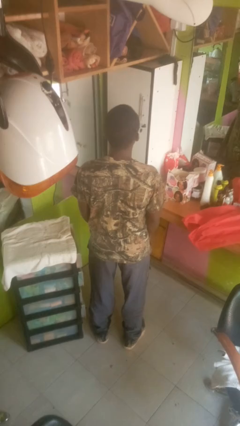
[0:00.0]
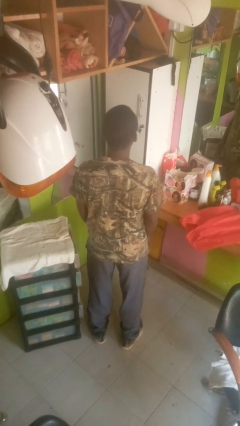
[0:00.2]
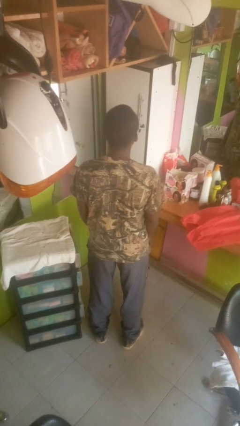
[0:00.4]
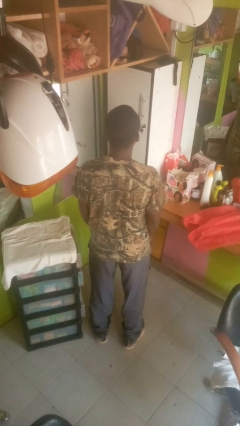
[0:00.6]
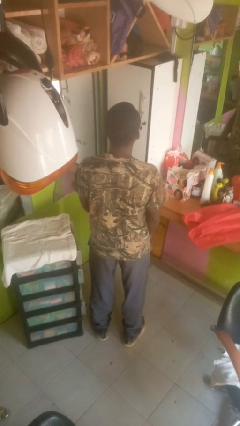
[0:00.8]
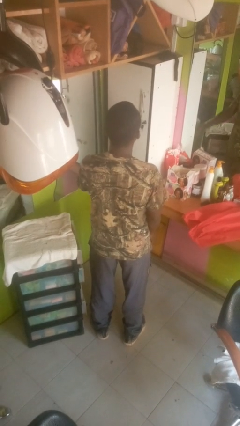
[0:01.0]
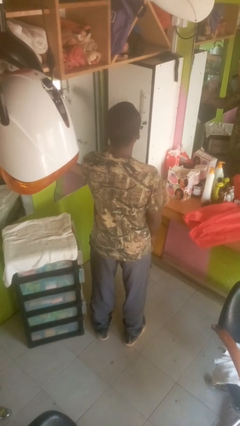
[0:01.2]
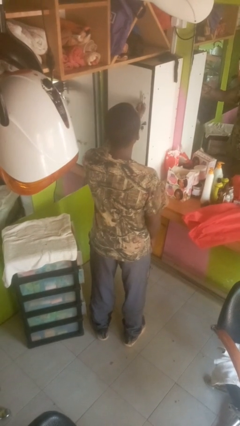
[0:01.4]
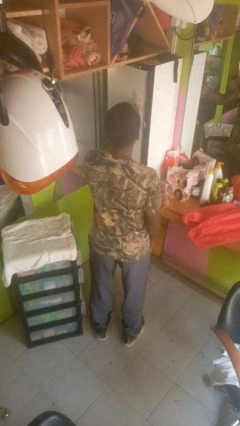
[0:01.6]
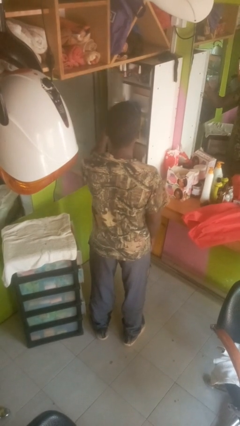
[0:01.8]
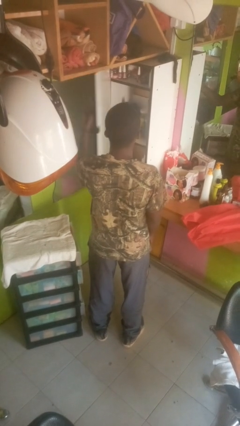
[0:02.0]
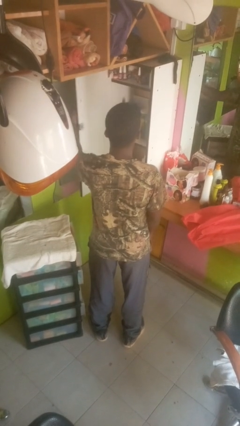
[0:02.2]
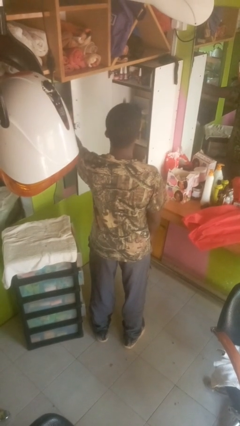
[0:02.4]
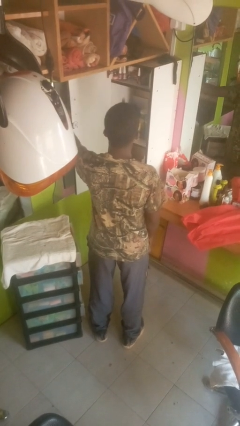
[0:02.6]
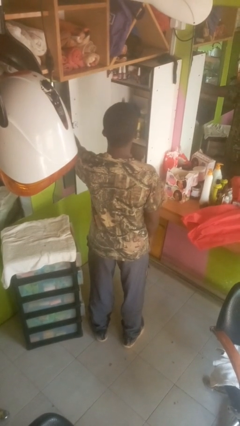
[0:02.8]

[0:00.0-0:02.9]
person opens closet door

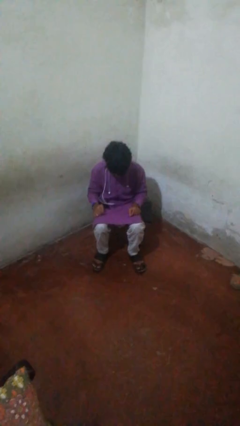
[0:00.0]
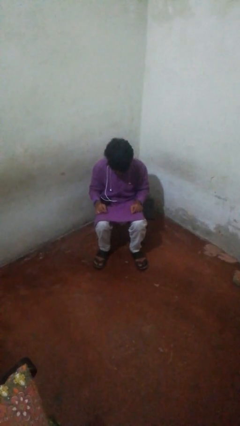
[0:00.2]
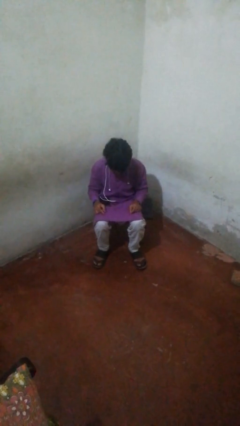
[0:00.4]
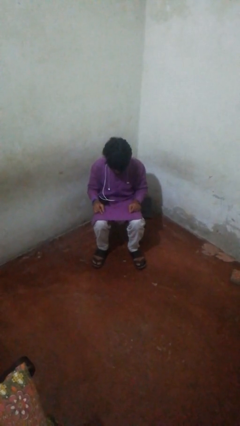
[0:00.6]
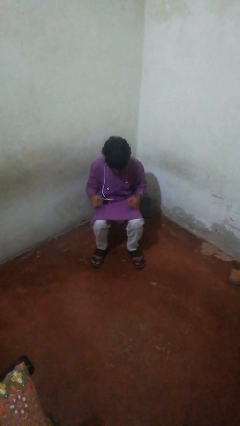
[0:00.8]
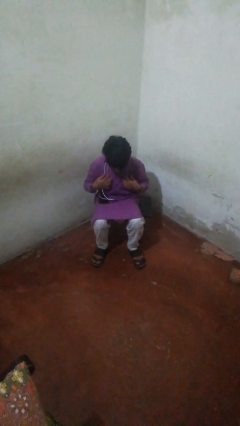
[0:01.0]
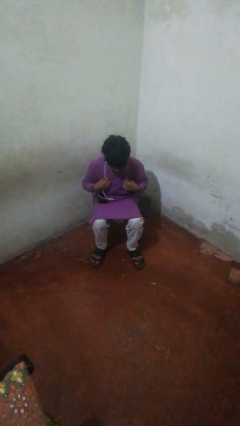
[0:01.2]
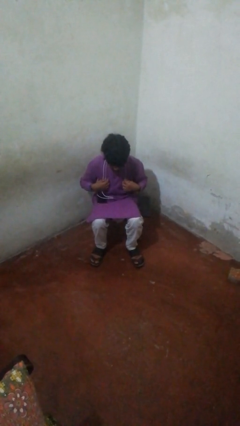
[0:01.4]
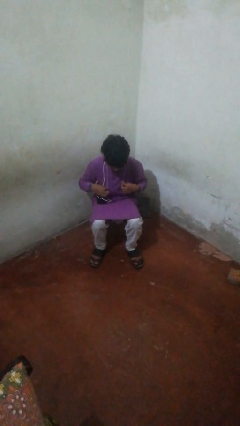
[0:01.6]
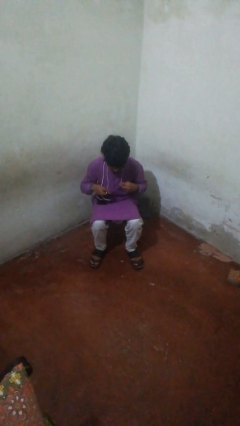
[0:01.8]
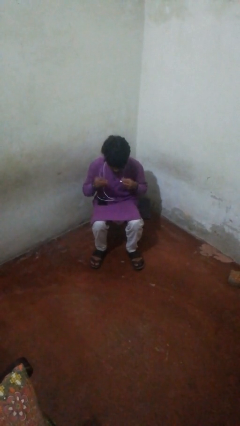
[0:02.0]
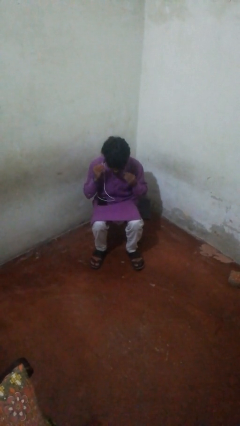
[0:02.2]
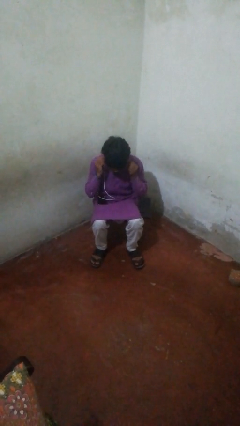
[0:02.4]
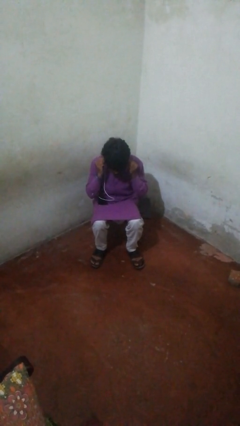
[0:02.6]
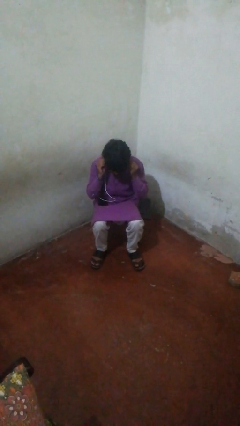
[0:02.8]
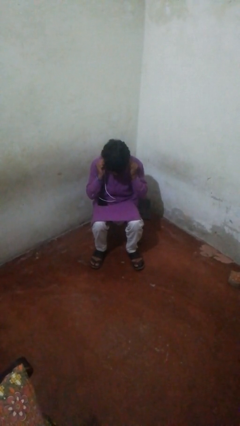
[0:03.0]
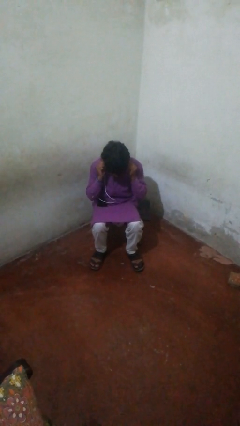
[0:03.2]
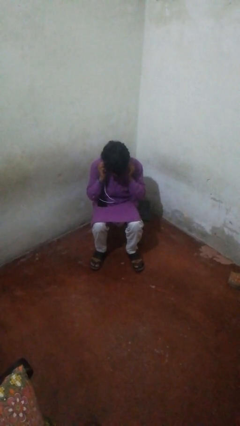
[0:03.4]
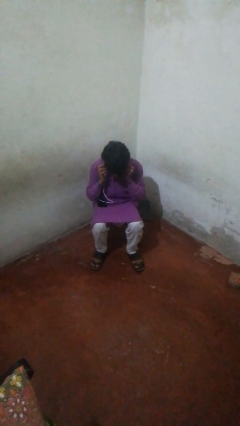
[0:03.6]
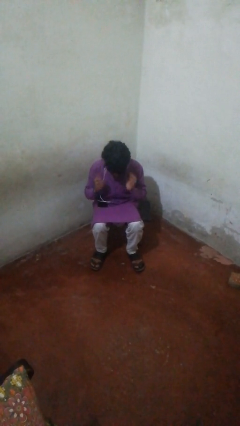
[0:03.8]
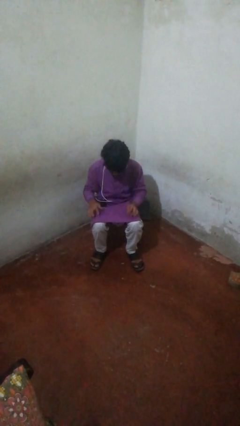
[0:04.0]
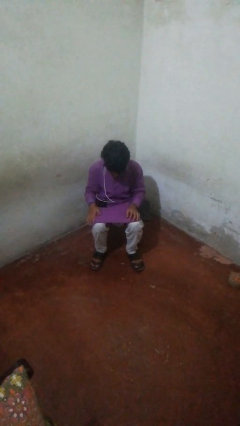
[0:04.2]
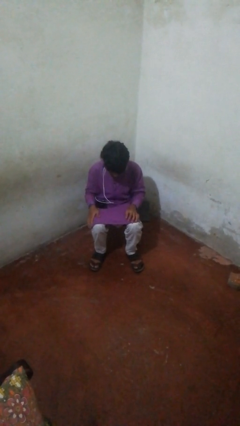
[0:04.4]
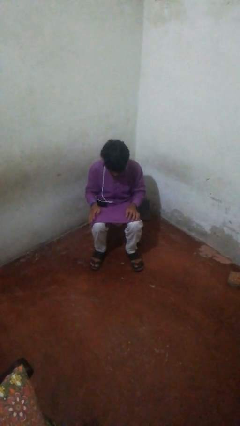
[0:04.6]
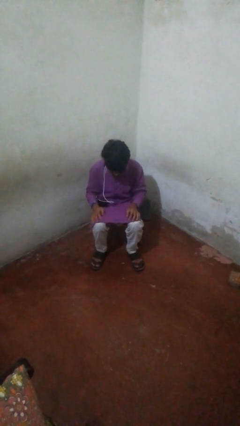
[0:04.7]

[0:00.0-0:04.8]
person puts on headphones

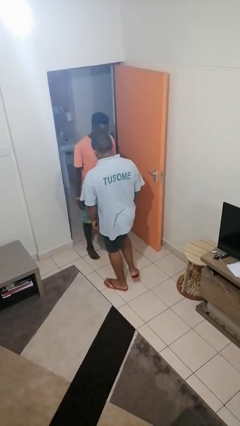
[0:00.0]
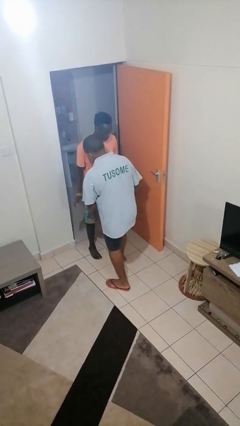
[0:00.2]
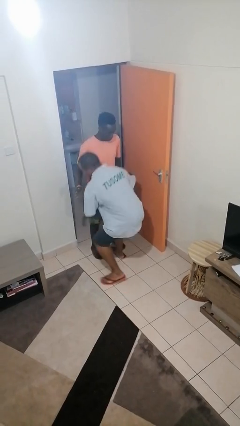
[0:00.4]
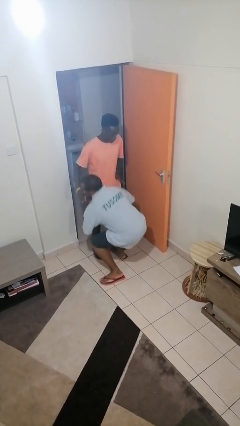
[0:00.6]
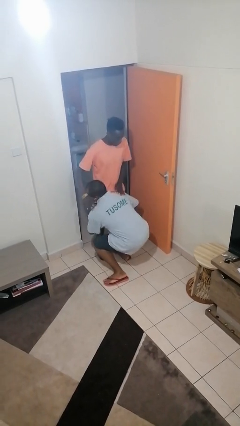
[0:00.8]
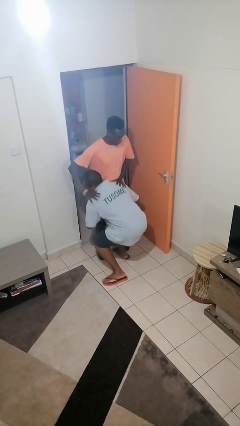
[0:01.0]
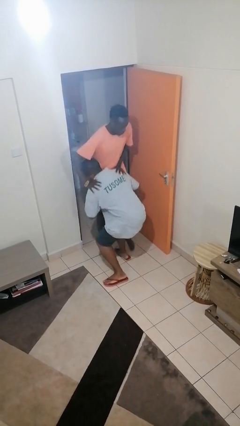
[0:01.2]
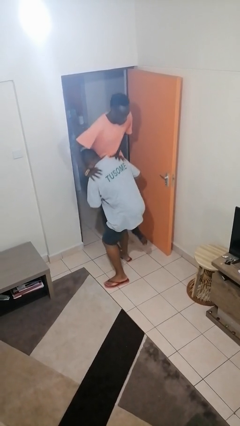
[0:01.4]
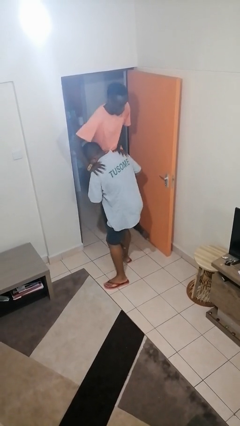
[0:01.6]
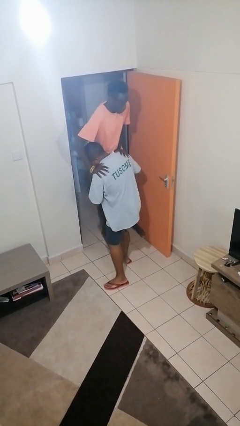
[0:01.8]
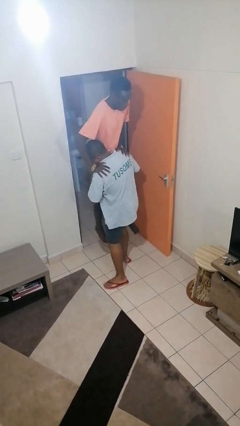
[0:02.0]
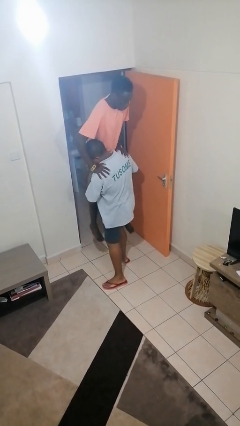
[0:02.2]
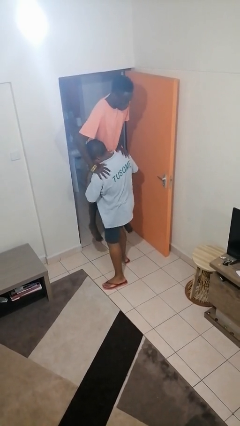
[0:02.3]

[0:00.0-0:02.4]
person carries person over shoulder

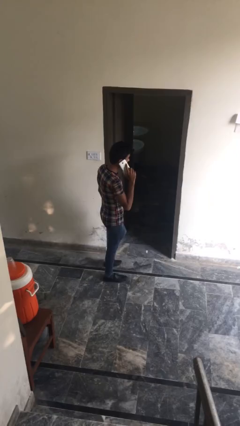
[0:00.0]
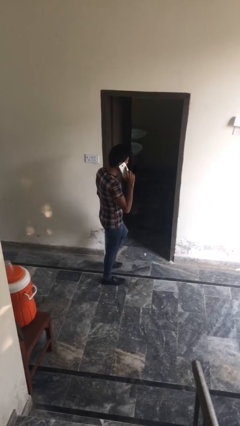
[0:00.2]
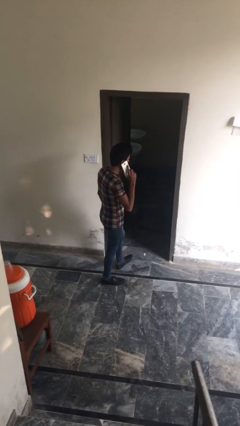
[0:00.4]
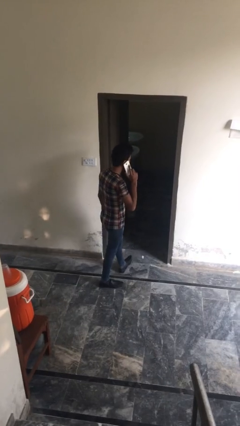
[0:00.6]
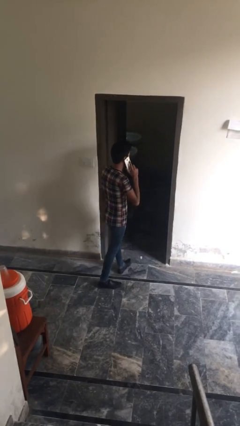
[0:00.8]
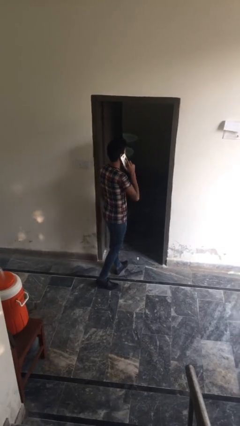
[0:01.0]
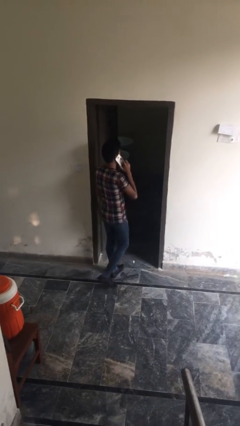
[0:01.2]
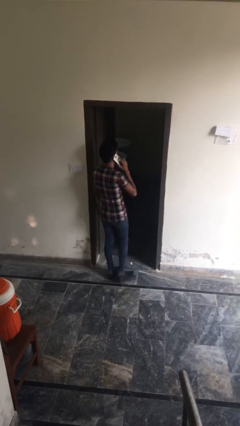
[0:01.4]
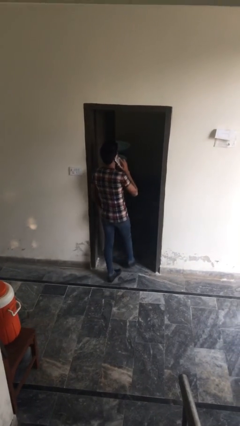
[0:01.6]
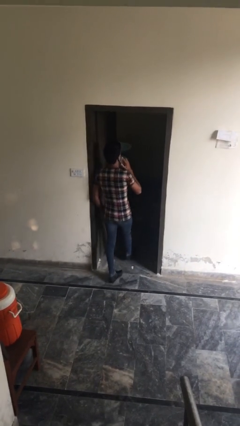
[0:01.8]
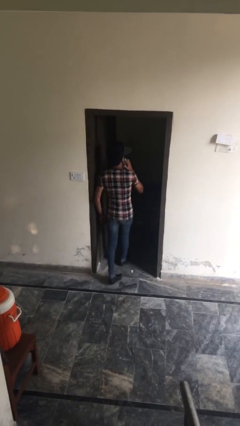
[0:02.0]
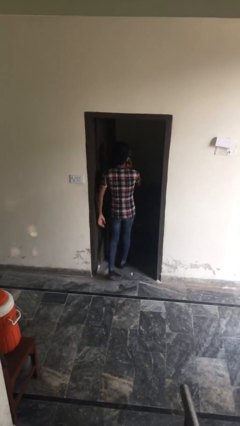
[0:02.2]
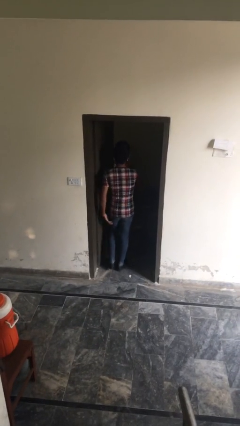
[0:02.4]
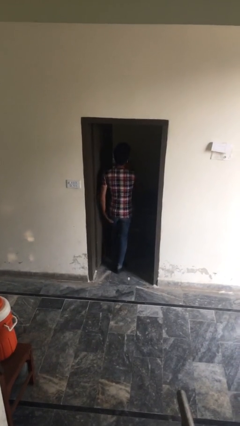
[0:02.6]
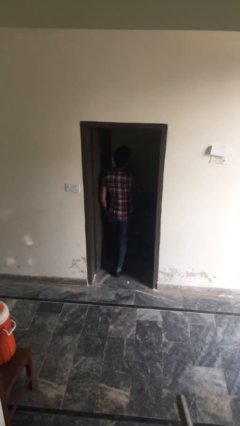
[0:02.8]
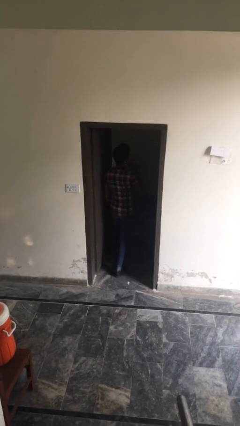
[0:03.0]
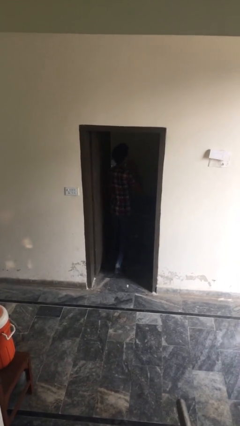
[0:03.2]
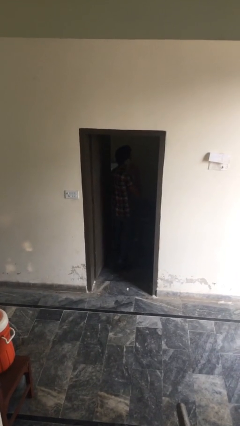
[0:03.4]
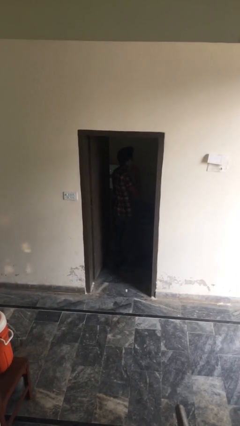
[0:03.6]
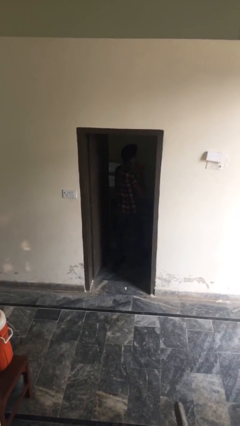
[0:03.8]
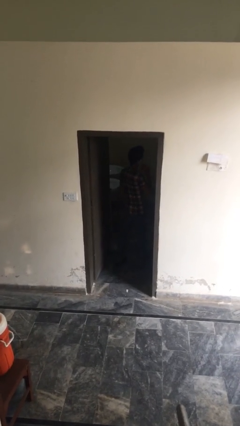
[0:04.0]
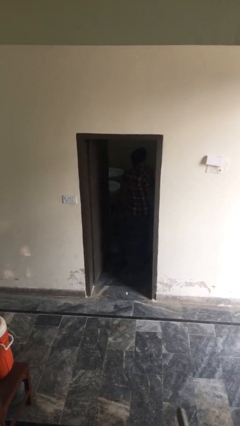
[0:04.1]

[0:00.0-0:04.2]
person exits scene through structure

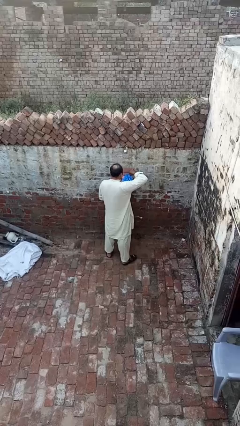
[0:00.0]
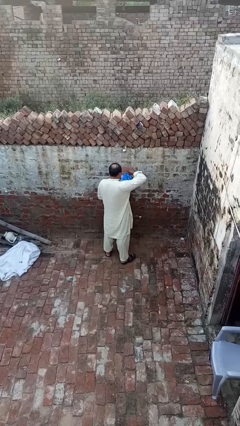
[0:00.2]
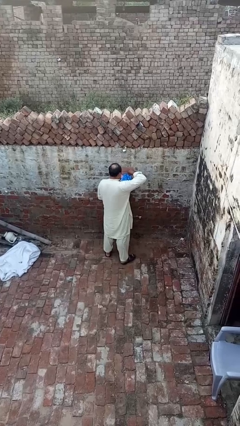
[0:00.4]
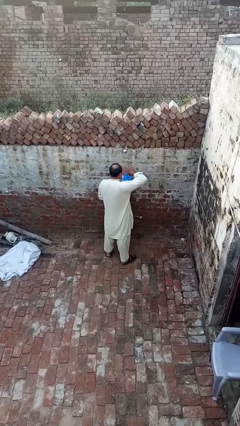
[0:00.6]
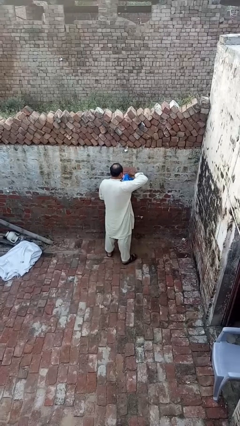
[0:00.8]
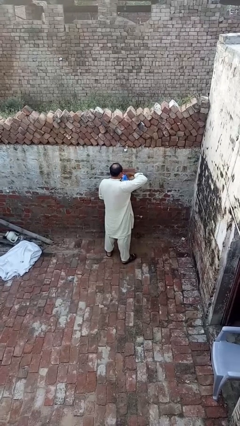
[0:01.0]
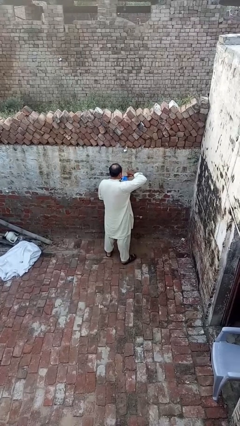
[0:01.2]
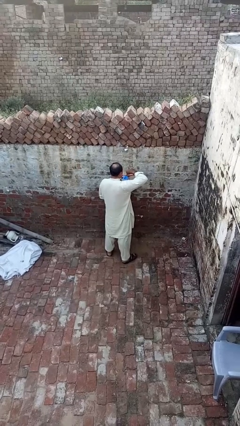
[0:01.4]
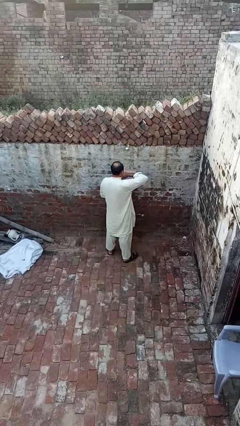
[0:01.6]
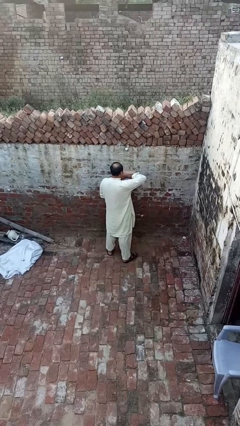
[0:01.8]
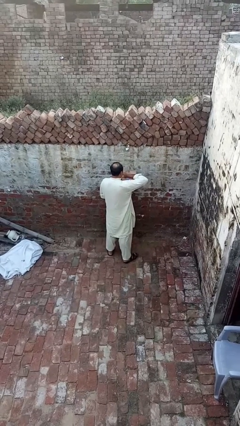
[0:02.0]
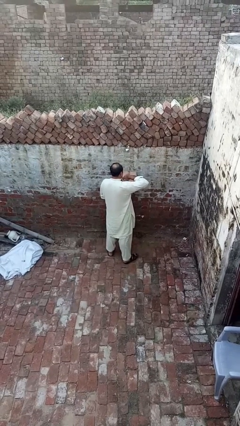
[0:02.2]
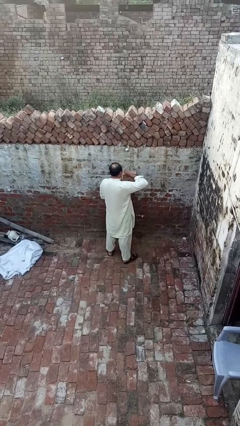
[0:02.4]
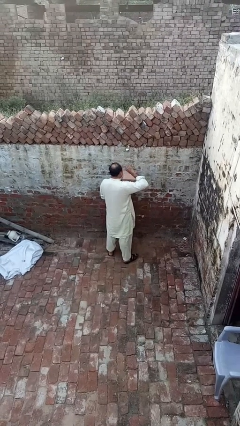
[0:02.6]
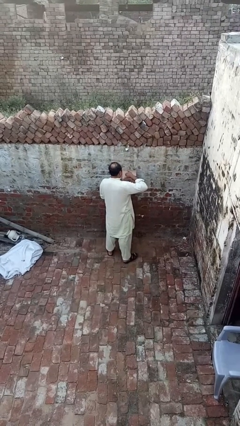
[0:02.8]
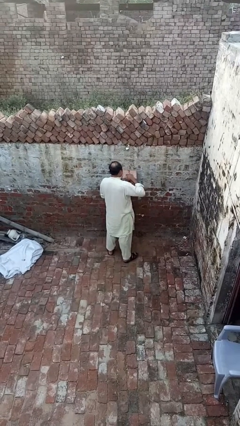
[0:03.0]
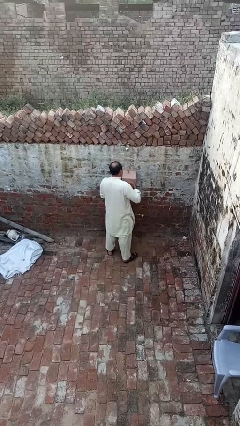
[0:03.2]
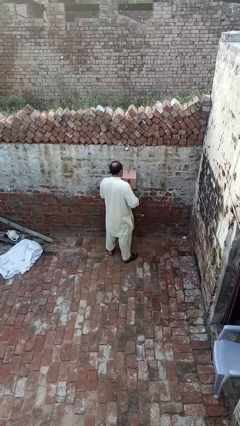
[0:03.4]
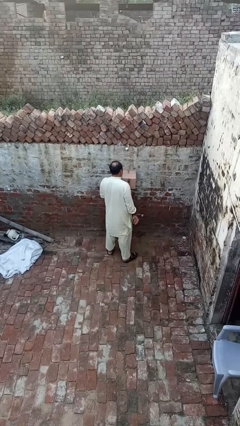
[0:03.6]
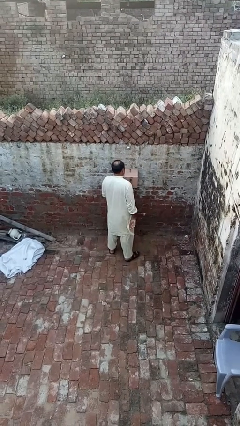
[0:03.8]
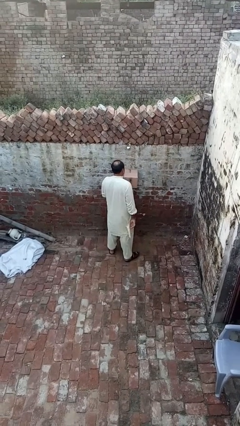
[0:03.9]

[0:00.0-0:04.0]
person closes mailbox
